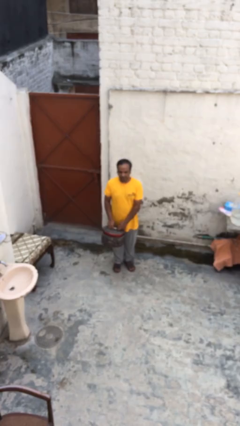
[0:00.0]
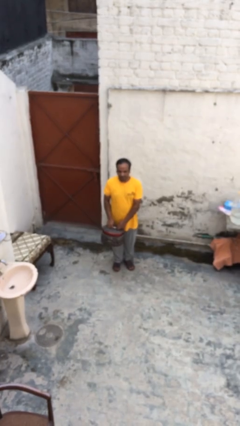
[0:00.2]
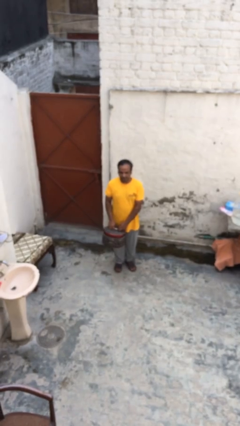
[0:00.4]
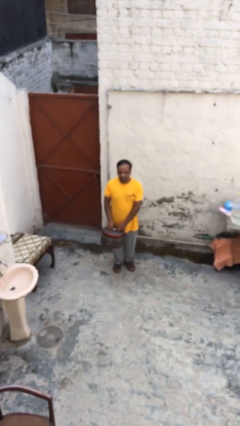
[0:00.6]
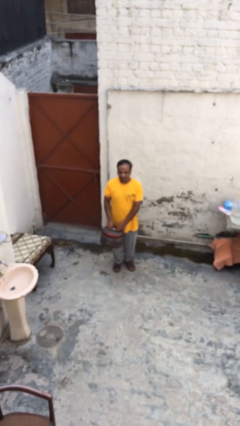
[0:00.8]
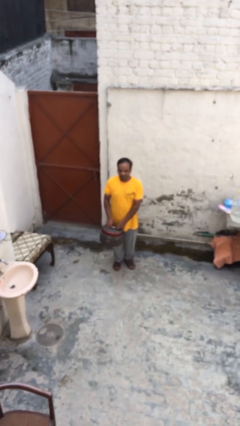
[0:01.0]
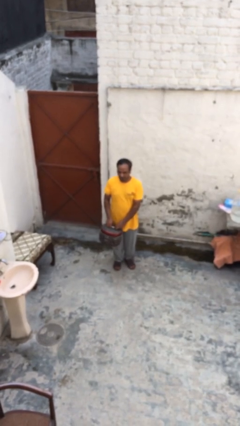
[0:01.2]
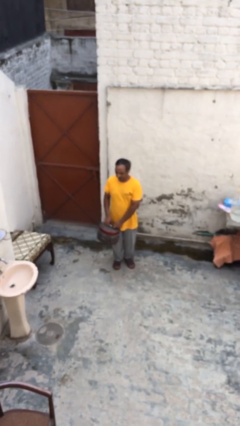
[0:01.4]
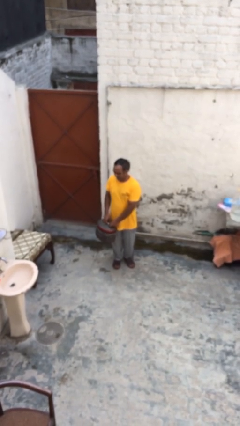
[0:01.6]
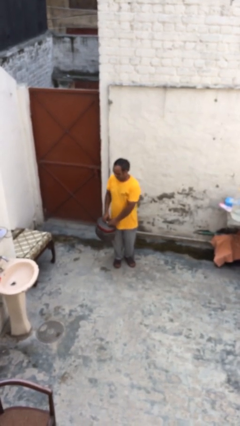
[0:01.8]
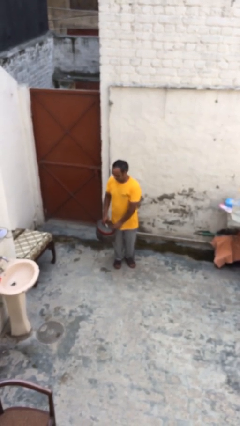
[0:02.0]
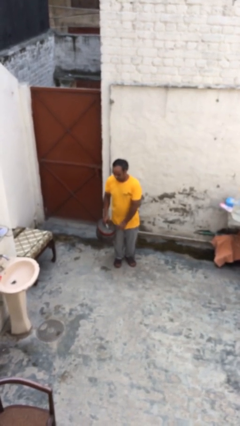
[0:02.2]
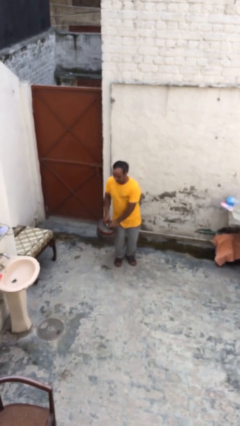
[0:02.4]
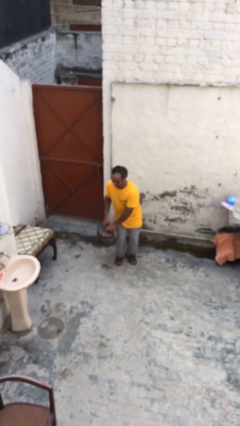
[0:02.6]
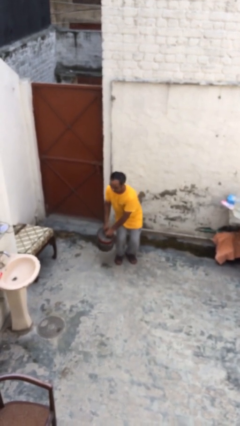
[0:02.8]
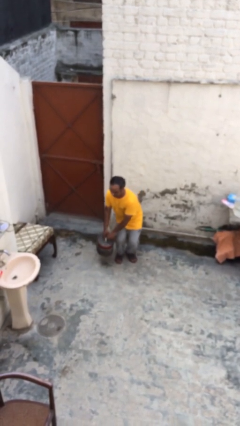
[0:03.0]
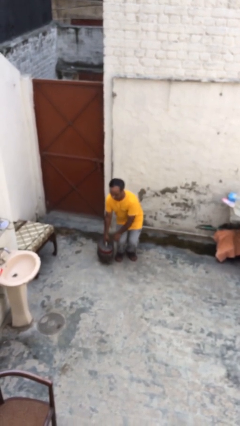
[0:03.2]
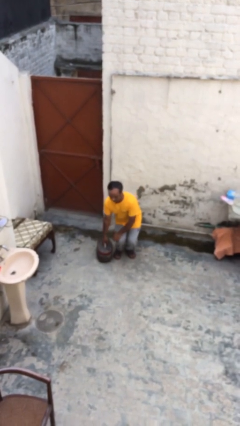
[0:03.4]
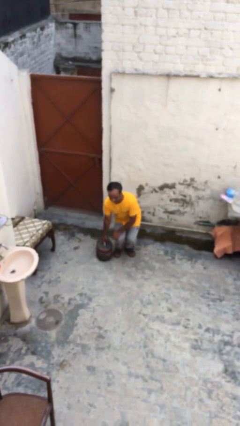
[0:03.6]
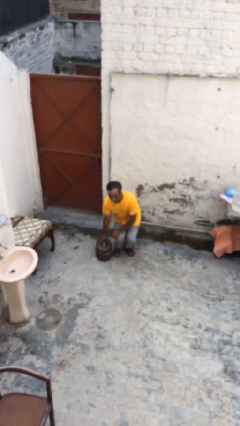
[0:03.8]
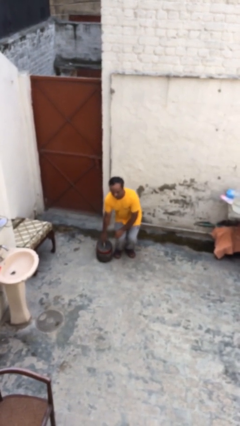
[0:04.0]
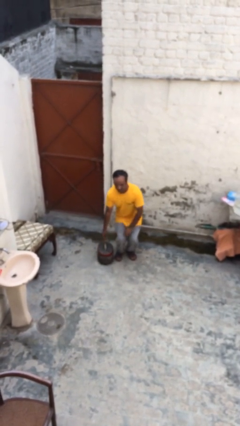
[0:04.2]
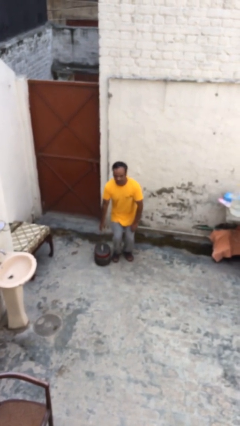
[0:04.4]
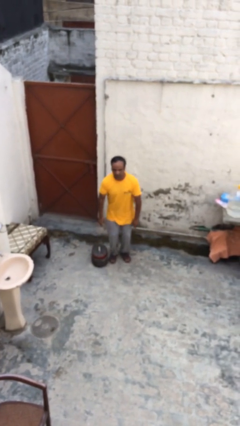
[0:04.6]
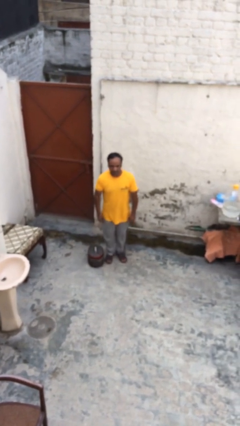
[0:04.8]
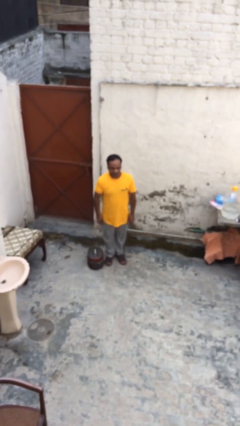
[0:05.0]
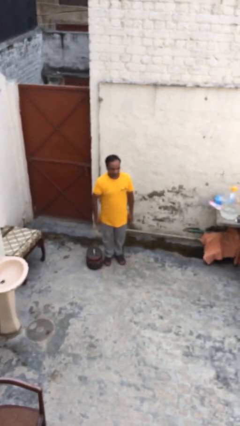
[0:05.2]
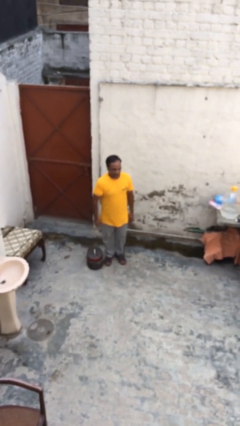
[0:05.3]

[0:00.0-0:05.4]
person puts down object on floor

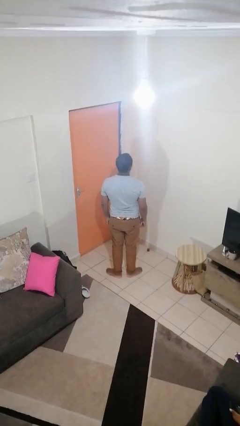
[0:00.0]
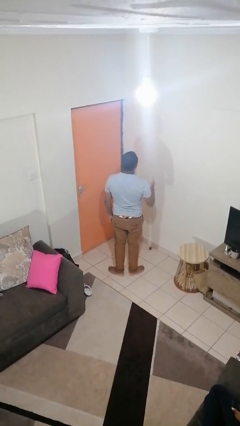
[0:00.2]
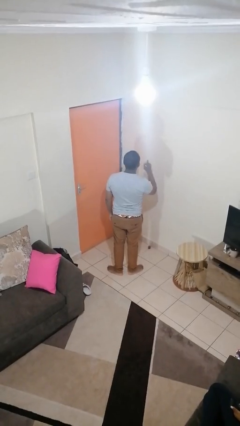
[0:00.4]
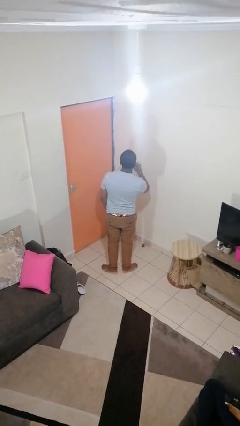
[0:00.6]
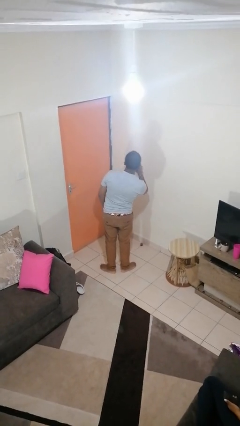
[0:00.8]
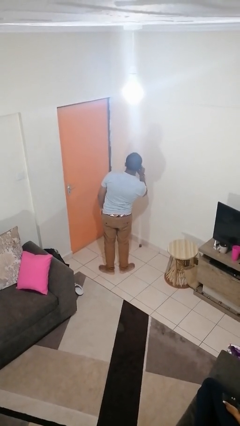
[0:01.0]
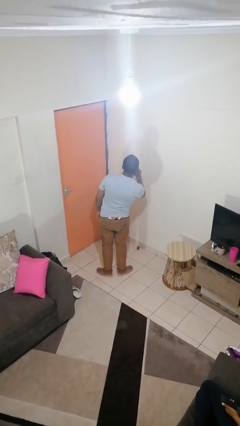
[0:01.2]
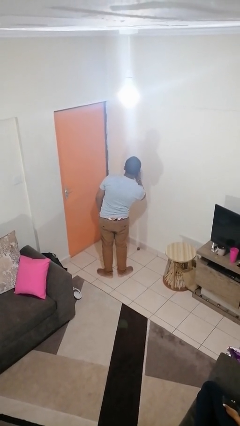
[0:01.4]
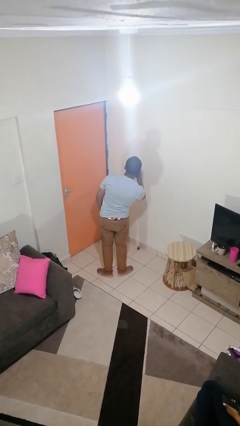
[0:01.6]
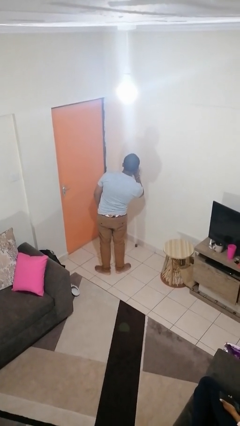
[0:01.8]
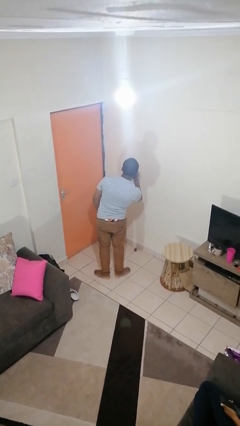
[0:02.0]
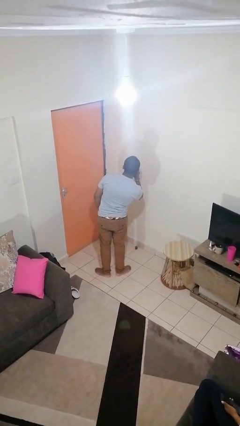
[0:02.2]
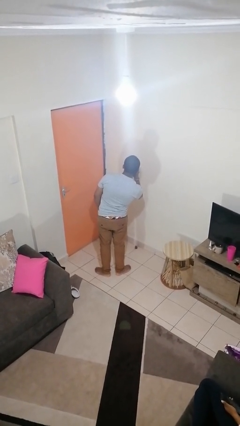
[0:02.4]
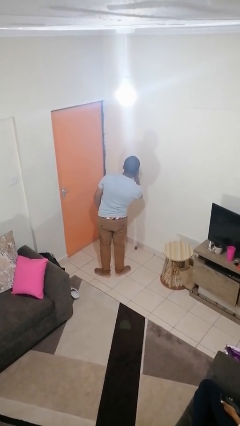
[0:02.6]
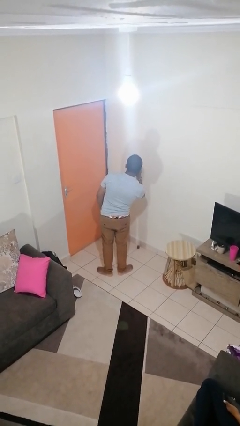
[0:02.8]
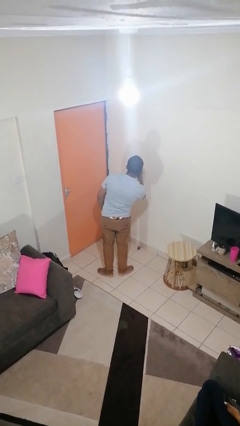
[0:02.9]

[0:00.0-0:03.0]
person gestures listen closely

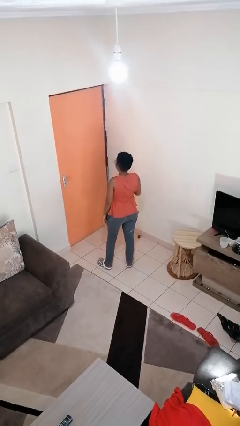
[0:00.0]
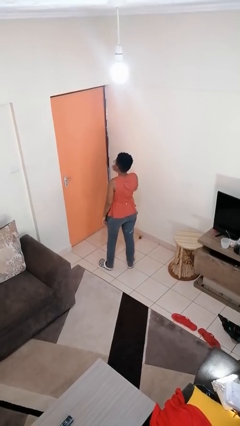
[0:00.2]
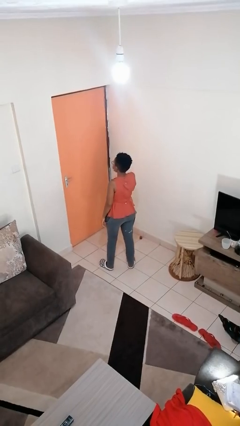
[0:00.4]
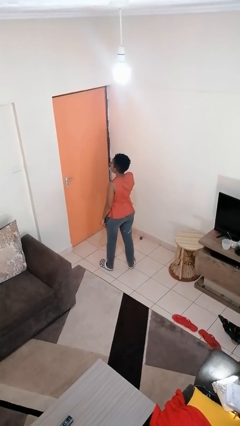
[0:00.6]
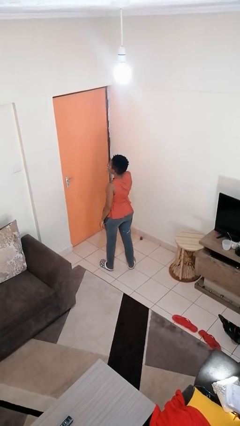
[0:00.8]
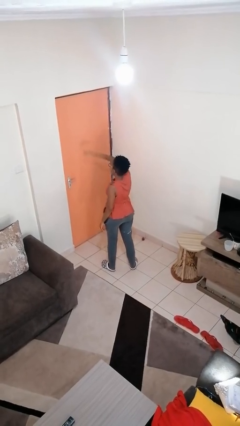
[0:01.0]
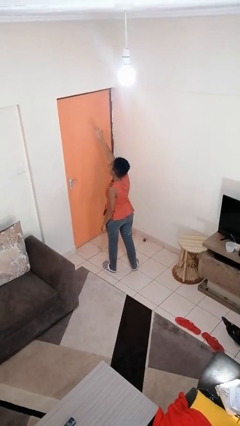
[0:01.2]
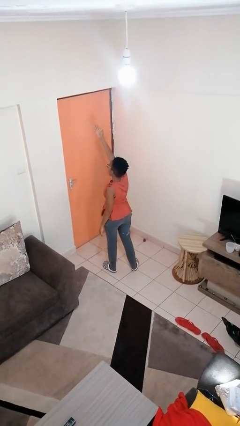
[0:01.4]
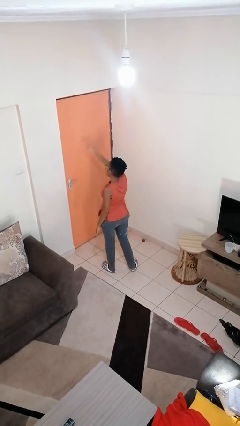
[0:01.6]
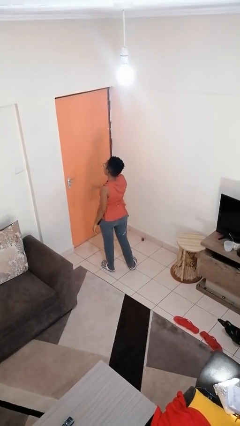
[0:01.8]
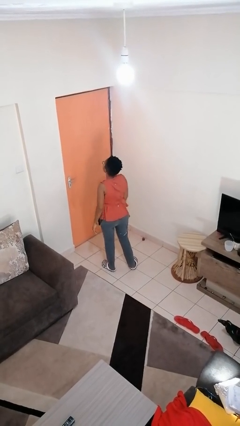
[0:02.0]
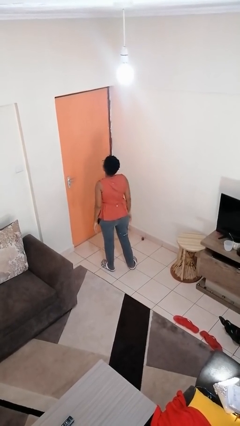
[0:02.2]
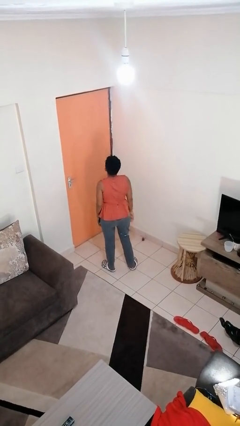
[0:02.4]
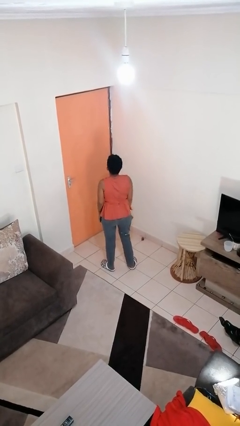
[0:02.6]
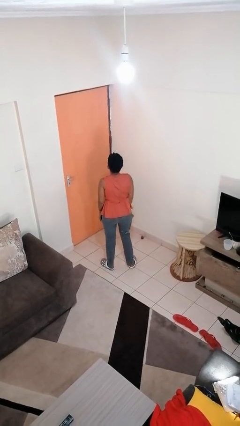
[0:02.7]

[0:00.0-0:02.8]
person gestures blow kiss

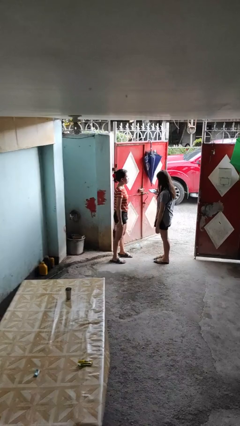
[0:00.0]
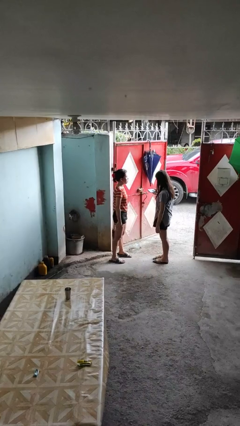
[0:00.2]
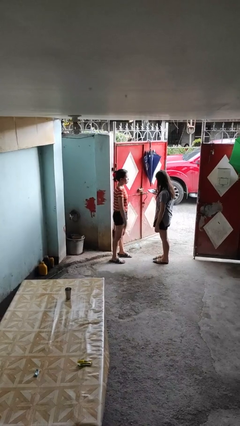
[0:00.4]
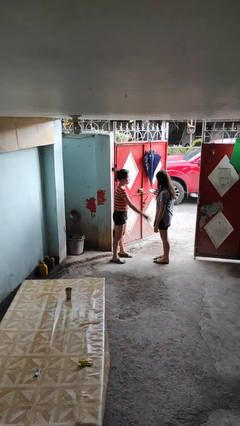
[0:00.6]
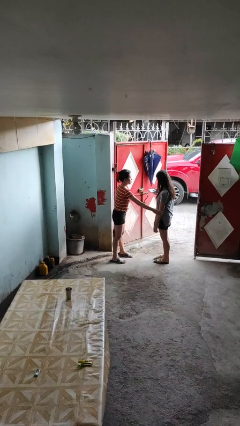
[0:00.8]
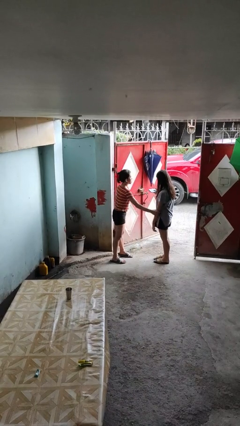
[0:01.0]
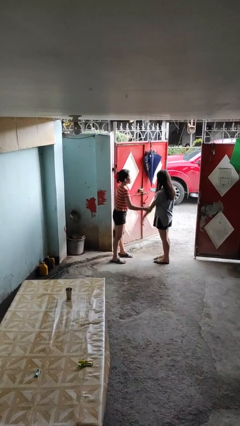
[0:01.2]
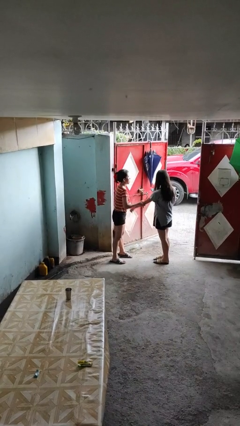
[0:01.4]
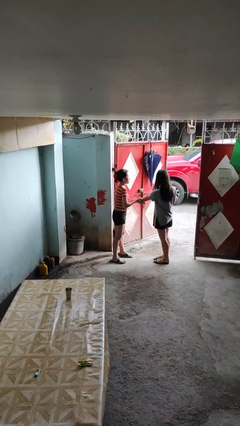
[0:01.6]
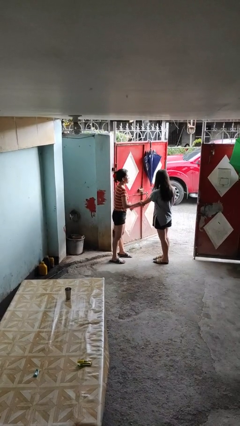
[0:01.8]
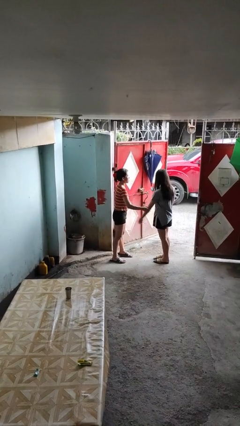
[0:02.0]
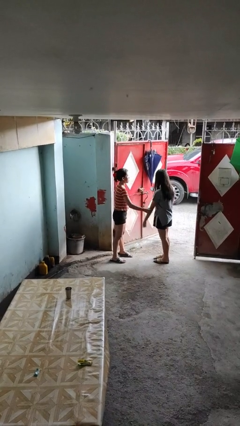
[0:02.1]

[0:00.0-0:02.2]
person grabs person by forearm

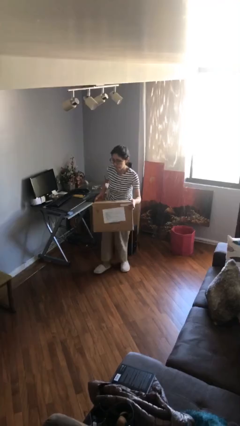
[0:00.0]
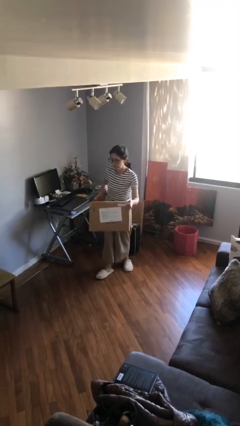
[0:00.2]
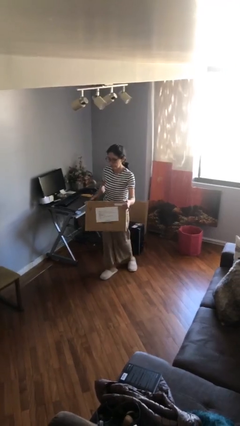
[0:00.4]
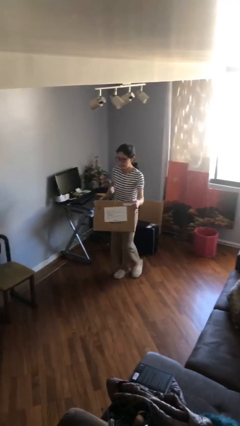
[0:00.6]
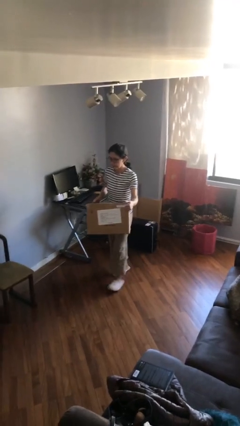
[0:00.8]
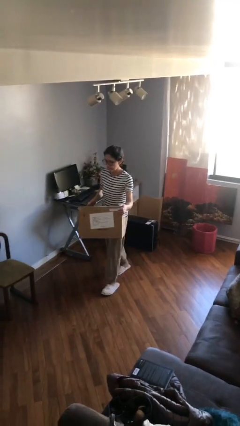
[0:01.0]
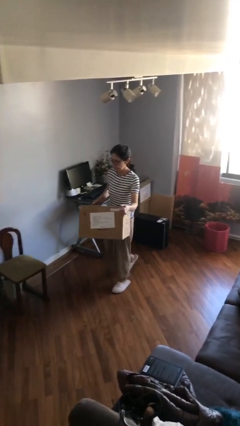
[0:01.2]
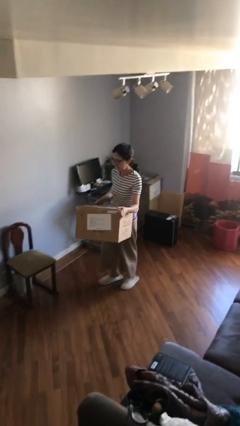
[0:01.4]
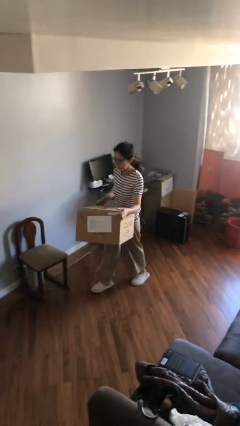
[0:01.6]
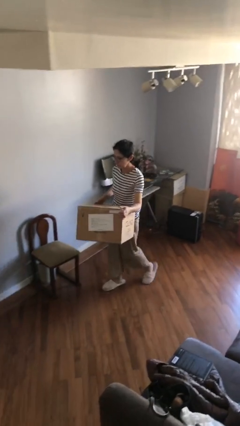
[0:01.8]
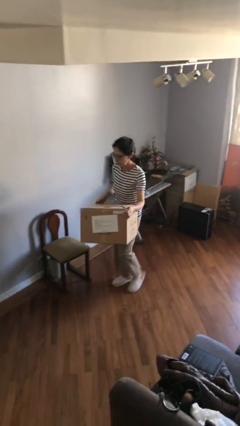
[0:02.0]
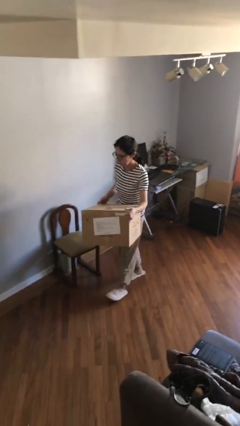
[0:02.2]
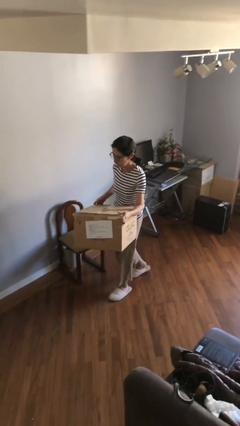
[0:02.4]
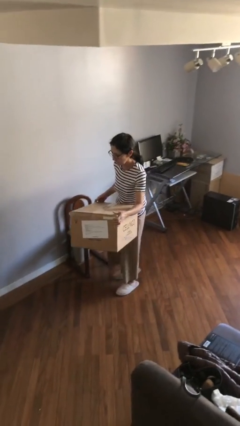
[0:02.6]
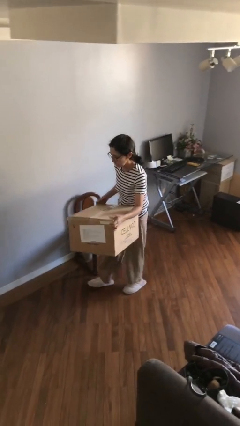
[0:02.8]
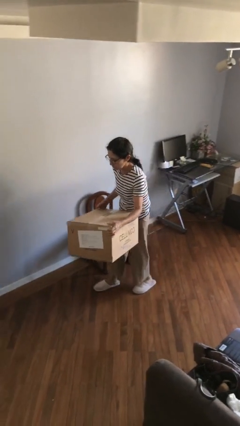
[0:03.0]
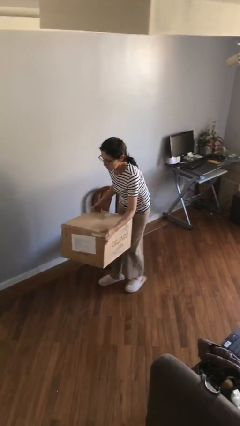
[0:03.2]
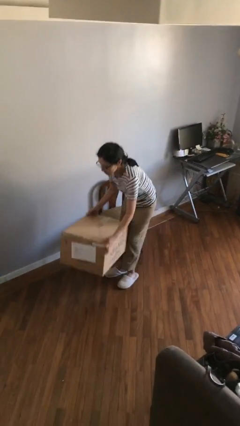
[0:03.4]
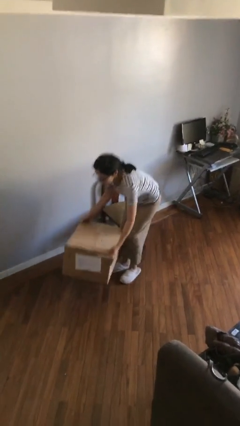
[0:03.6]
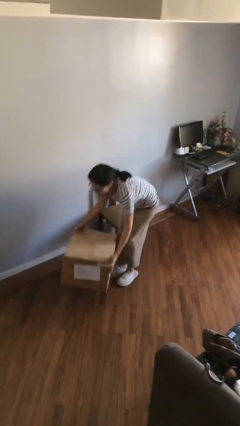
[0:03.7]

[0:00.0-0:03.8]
person carries heavy object

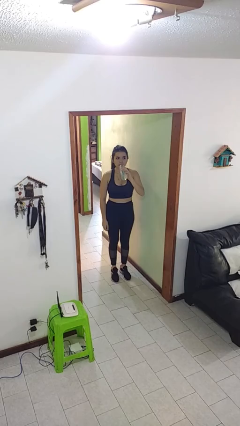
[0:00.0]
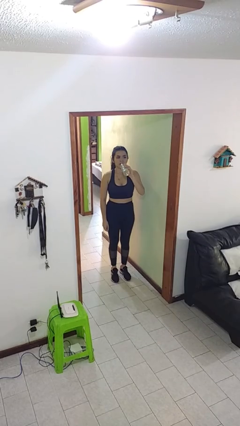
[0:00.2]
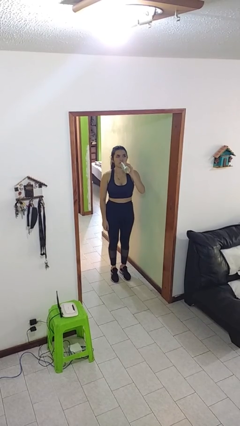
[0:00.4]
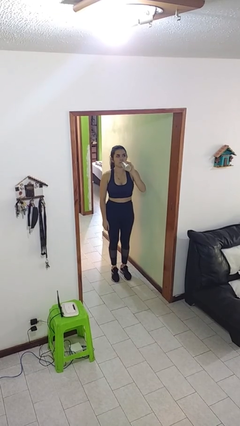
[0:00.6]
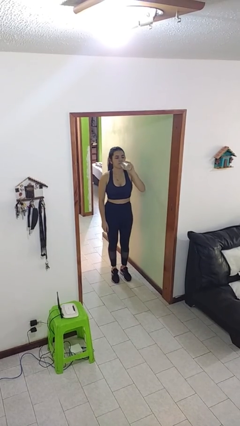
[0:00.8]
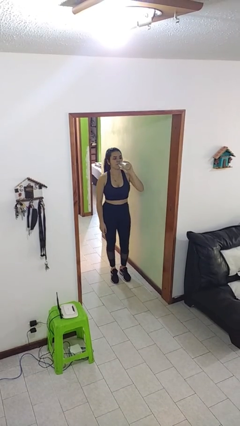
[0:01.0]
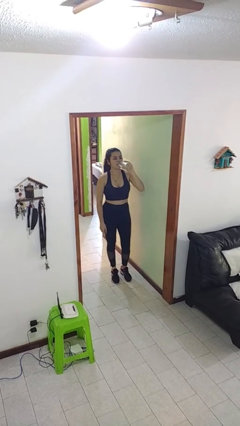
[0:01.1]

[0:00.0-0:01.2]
person drinks from bottle
